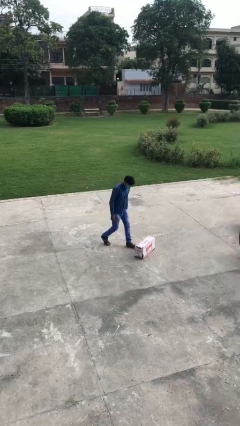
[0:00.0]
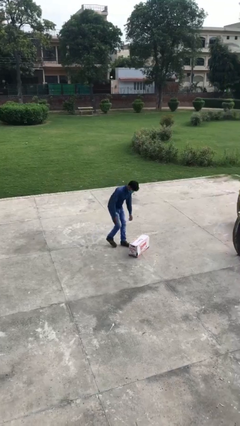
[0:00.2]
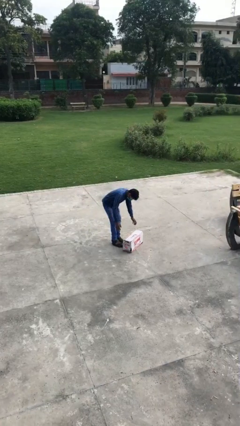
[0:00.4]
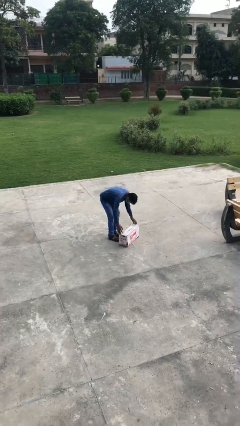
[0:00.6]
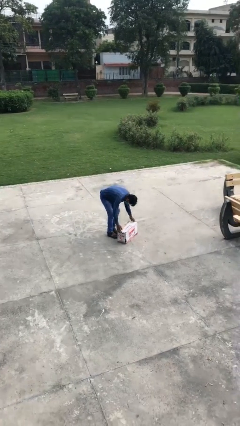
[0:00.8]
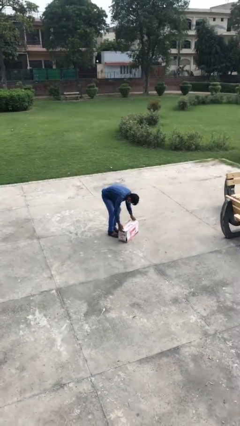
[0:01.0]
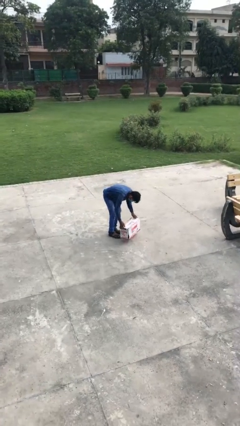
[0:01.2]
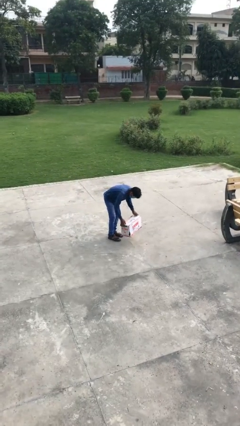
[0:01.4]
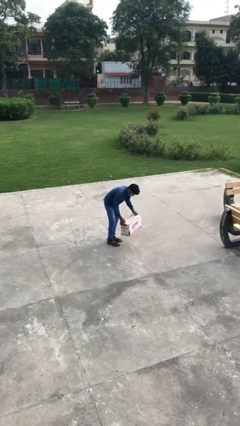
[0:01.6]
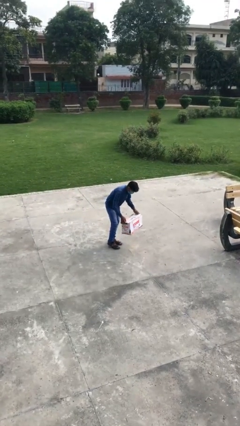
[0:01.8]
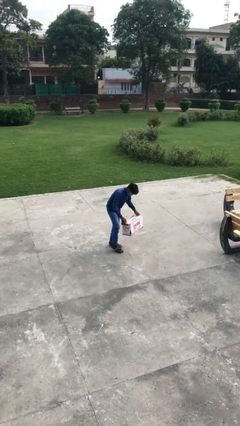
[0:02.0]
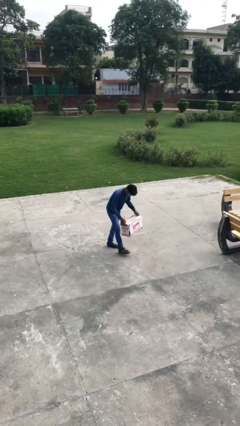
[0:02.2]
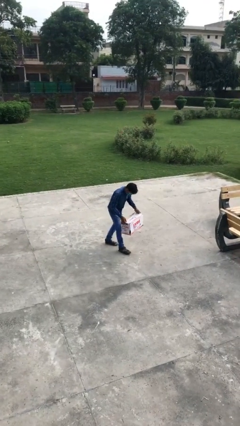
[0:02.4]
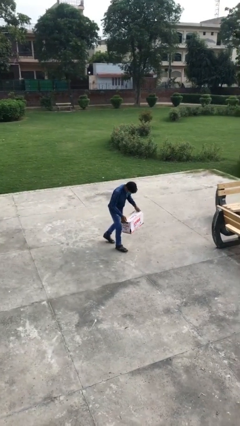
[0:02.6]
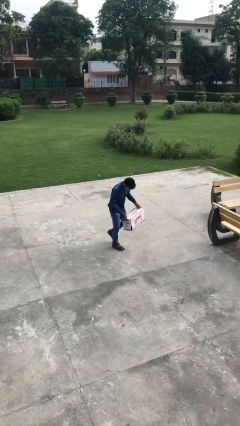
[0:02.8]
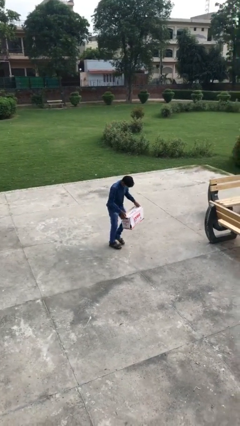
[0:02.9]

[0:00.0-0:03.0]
person picks up object from floor

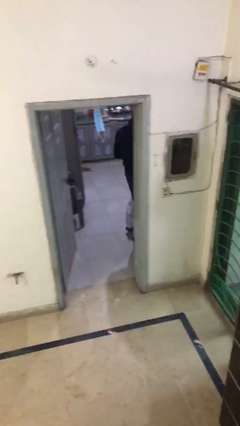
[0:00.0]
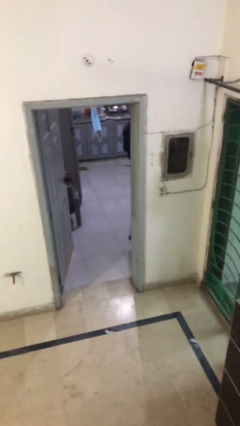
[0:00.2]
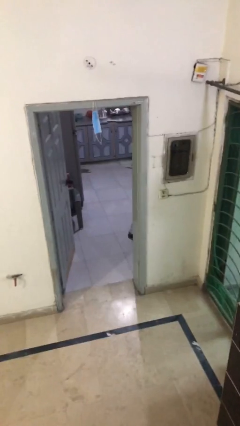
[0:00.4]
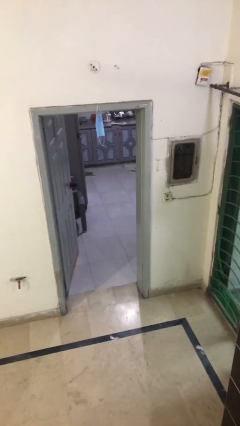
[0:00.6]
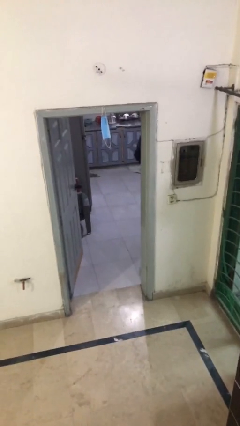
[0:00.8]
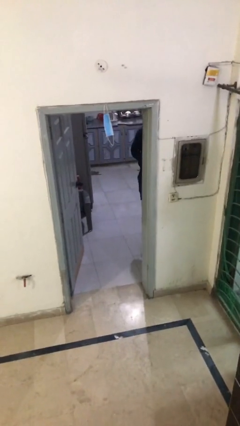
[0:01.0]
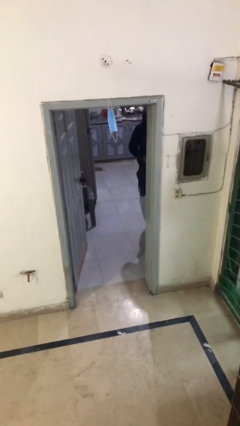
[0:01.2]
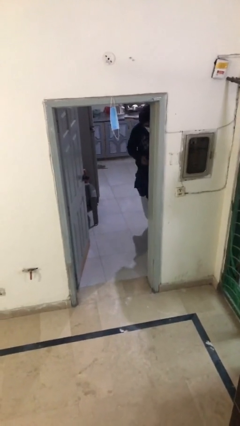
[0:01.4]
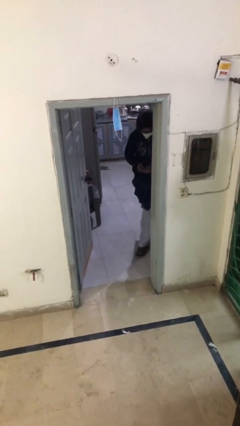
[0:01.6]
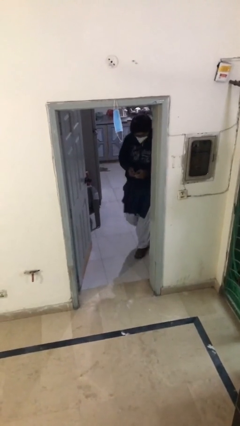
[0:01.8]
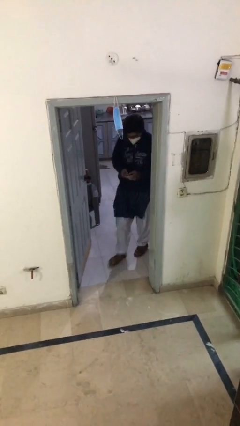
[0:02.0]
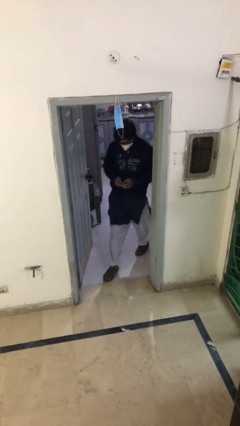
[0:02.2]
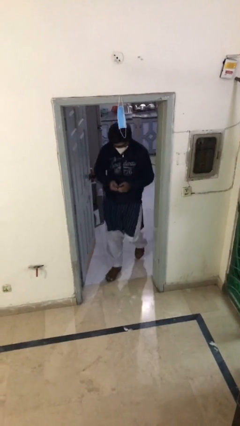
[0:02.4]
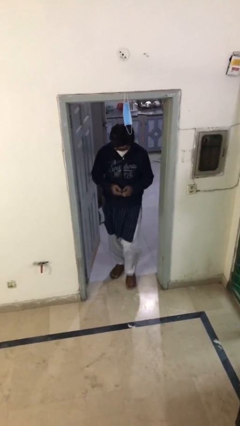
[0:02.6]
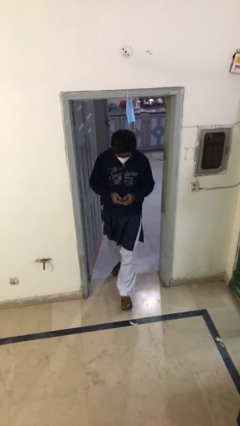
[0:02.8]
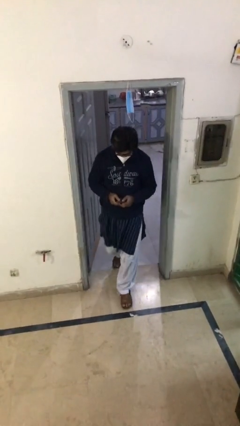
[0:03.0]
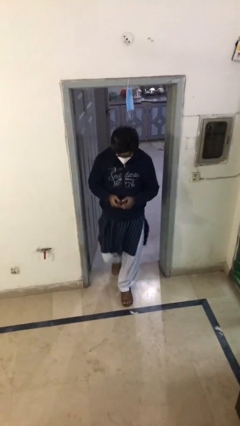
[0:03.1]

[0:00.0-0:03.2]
person enters scene through structure

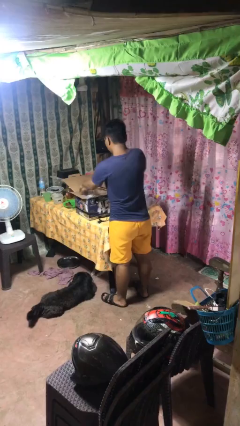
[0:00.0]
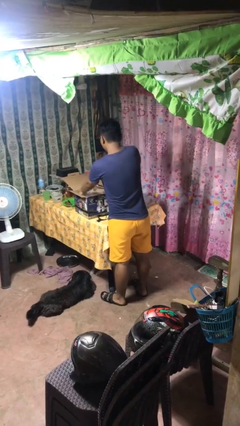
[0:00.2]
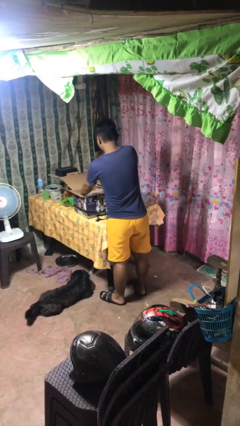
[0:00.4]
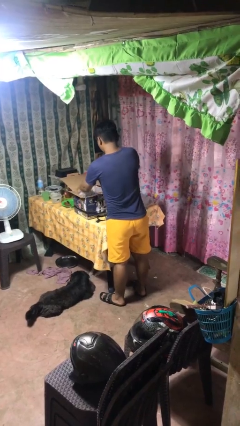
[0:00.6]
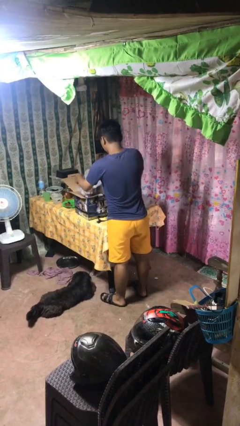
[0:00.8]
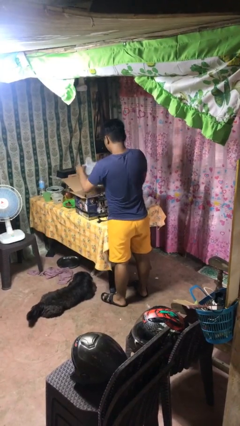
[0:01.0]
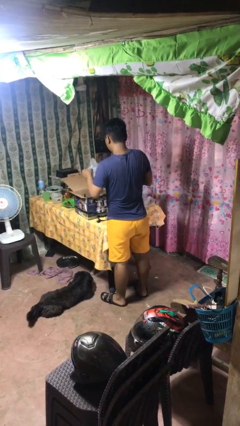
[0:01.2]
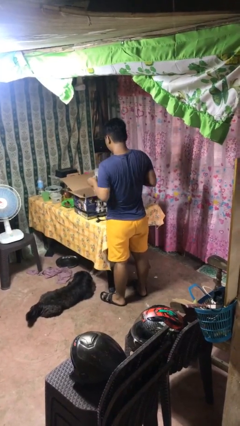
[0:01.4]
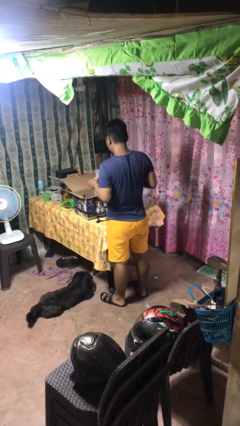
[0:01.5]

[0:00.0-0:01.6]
person takes object from box

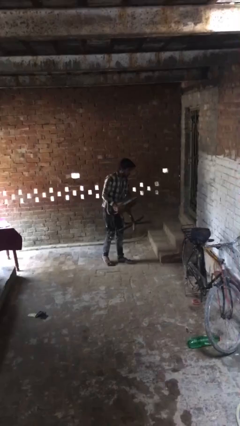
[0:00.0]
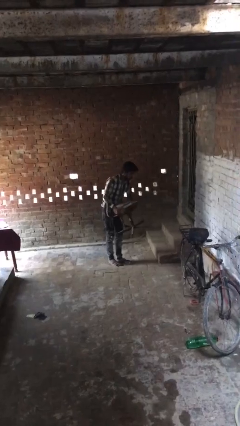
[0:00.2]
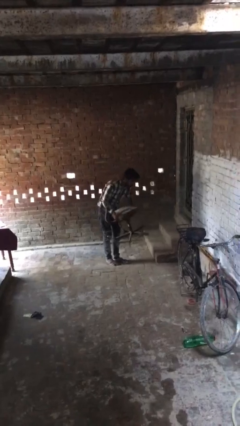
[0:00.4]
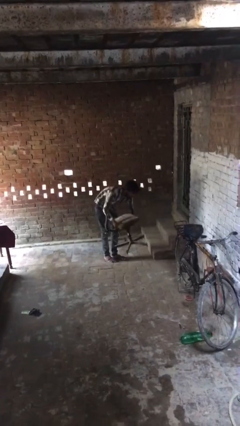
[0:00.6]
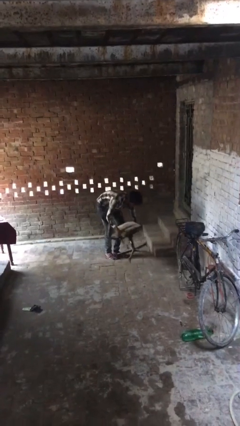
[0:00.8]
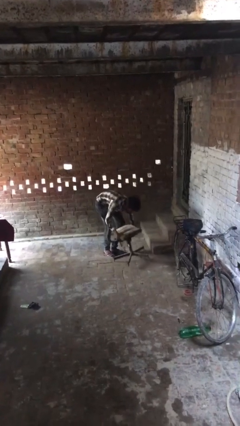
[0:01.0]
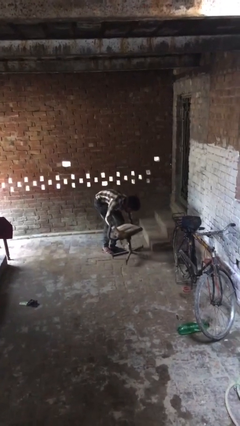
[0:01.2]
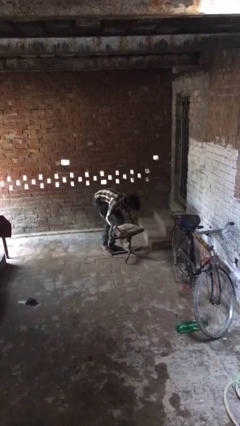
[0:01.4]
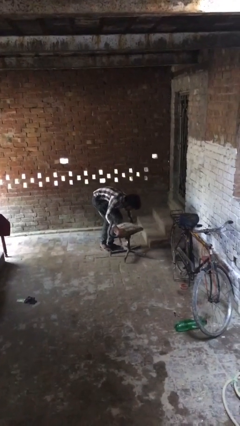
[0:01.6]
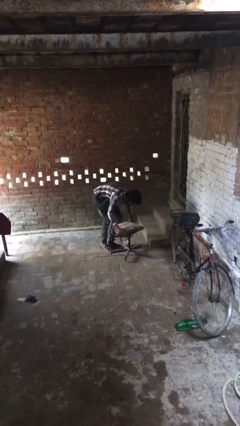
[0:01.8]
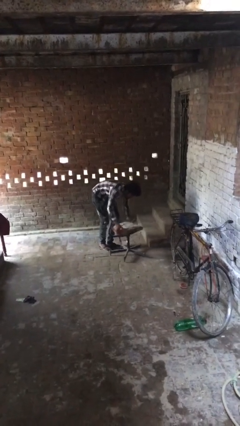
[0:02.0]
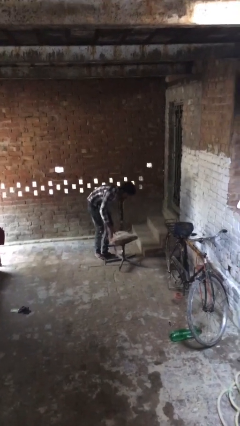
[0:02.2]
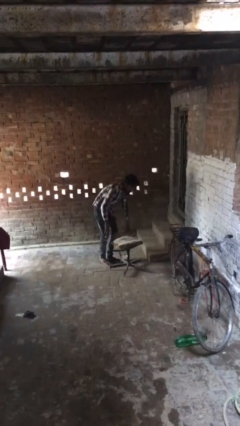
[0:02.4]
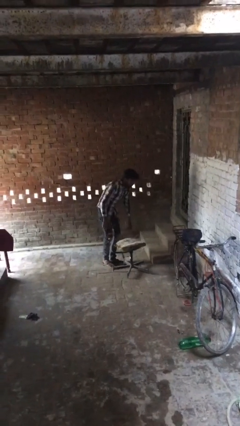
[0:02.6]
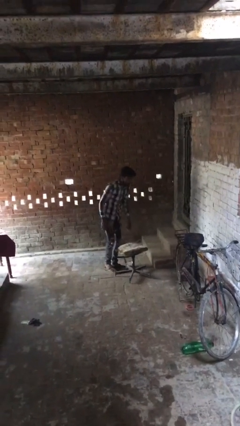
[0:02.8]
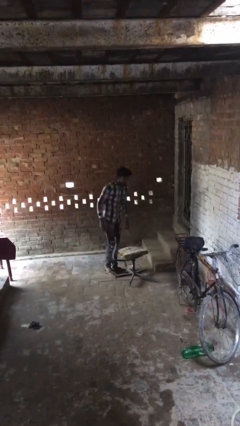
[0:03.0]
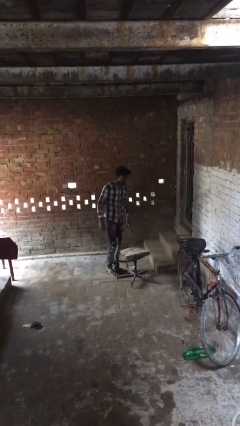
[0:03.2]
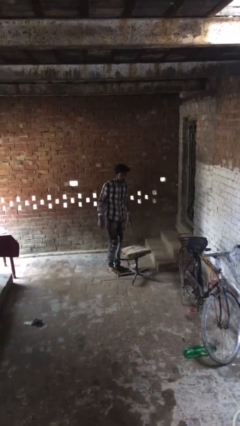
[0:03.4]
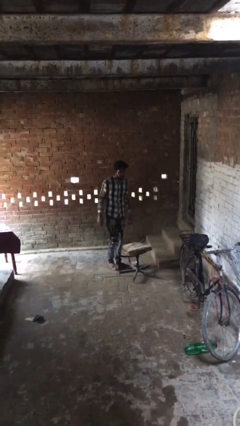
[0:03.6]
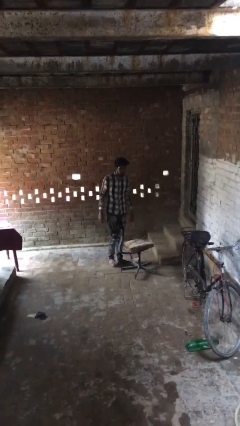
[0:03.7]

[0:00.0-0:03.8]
person puts down object on floor

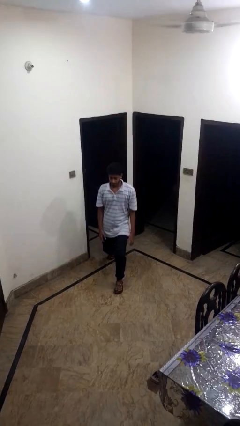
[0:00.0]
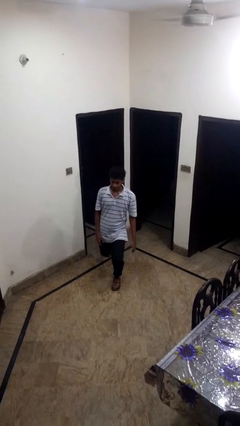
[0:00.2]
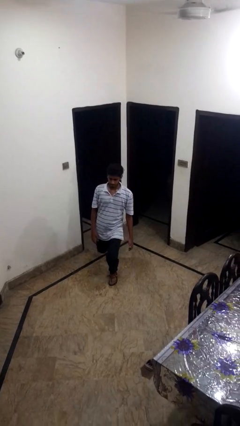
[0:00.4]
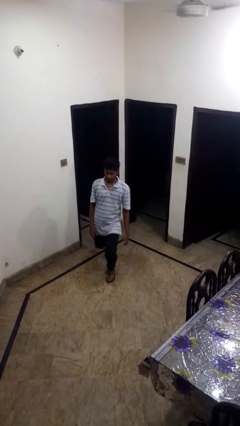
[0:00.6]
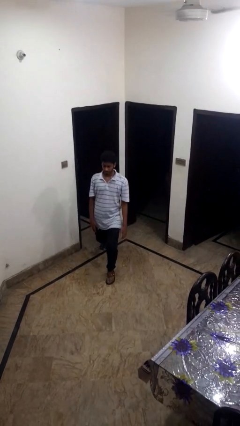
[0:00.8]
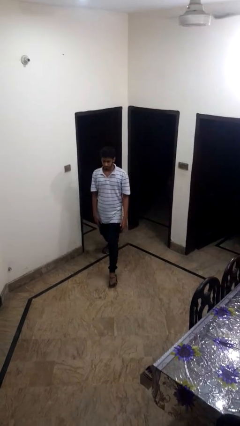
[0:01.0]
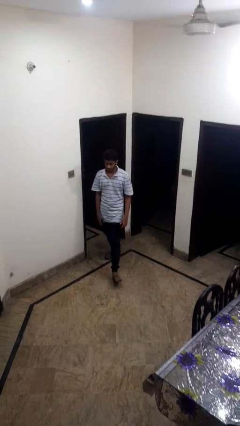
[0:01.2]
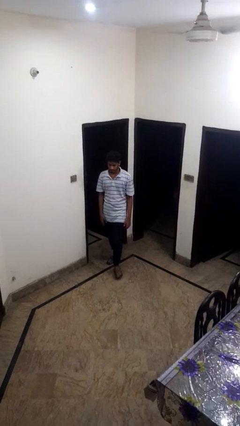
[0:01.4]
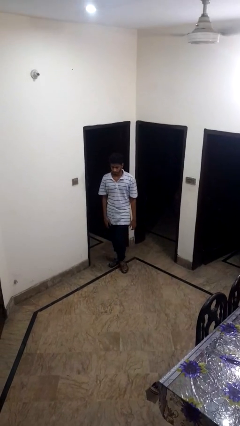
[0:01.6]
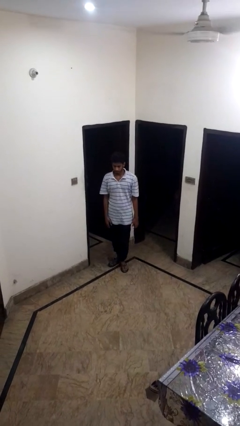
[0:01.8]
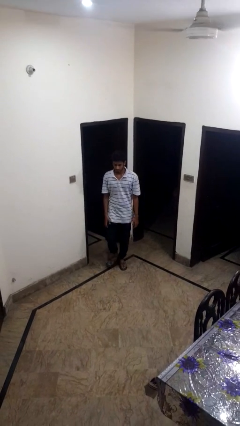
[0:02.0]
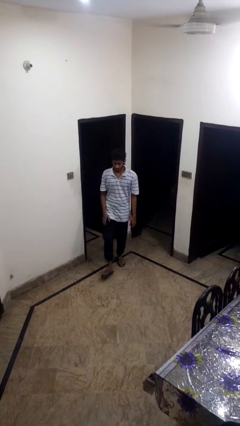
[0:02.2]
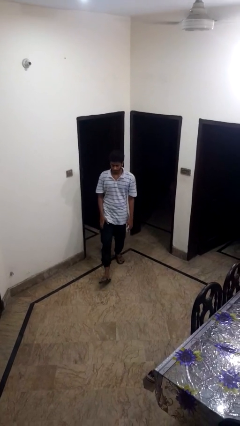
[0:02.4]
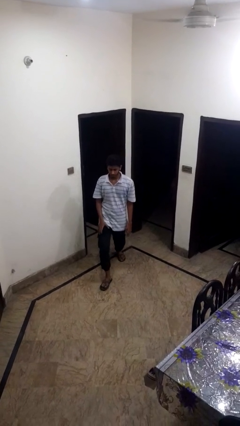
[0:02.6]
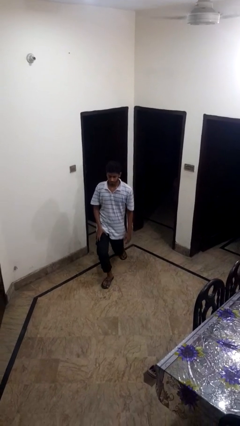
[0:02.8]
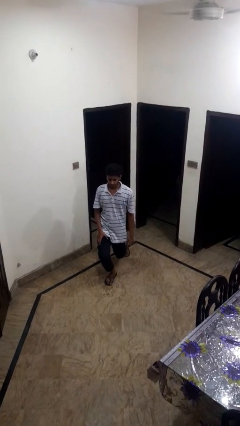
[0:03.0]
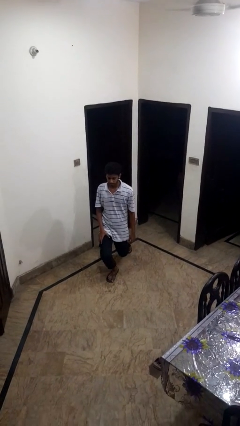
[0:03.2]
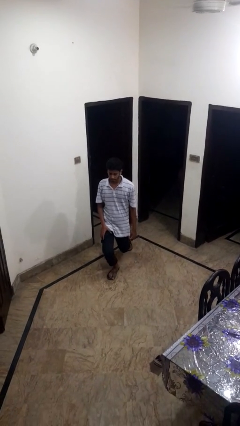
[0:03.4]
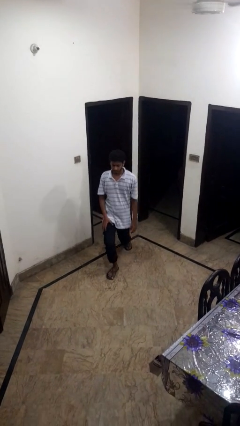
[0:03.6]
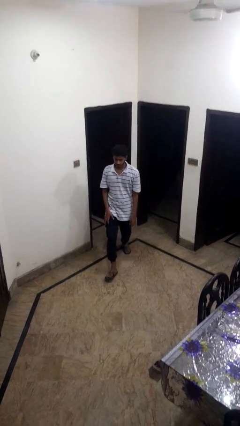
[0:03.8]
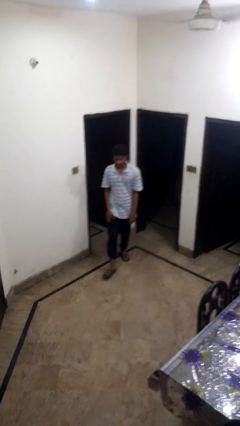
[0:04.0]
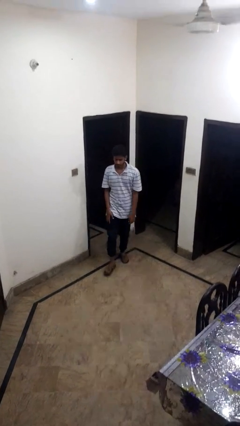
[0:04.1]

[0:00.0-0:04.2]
person exercises with lunges

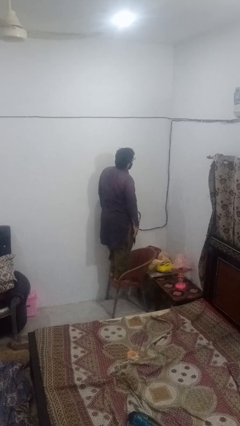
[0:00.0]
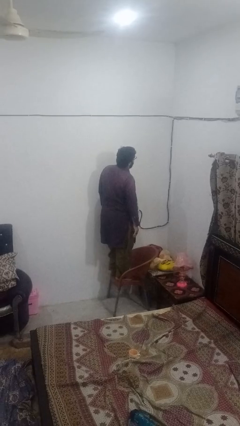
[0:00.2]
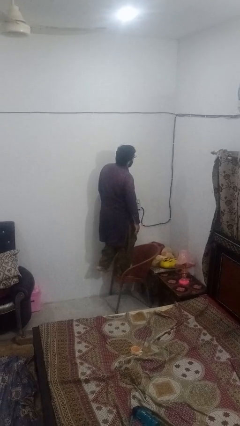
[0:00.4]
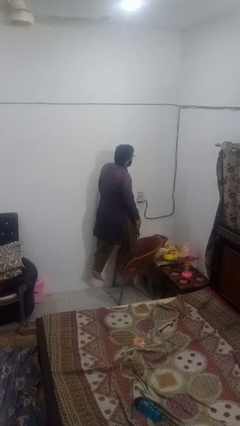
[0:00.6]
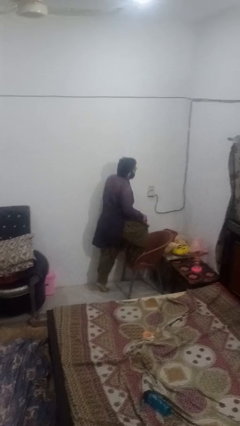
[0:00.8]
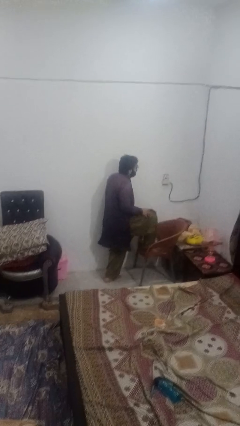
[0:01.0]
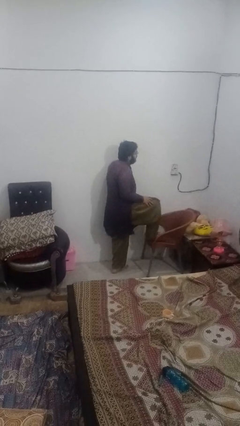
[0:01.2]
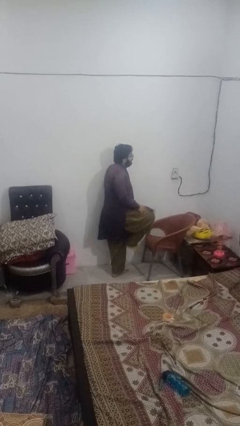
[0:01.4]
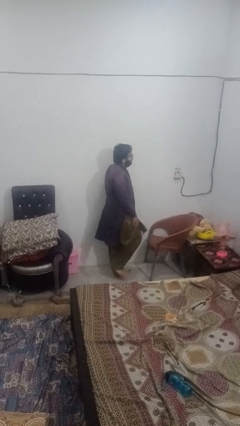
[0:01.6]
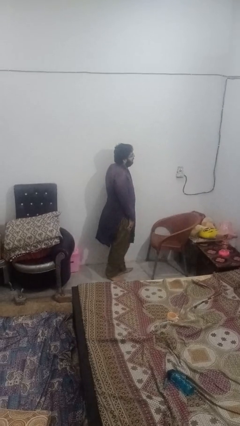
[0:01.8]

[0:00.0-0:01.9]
person climbs off chair
